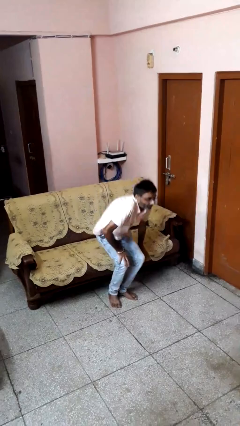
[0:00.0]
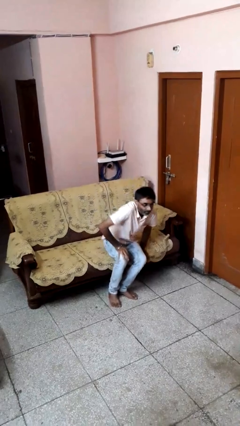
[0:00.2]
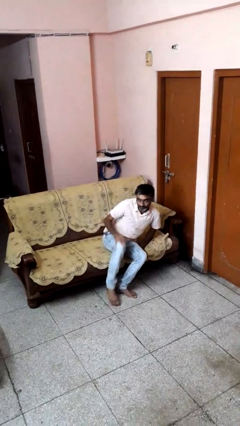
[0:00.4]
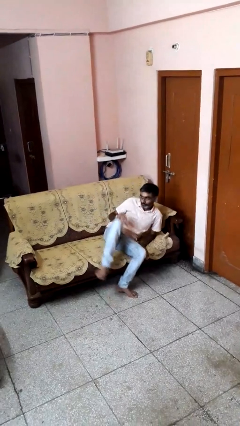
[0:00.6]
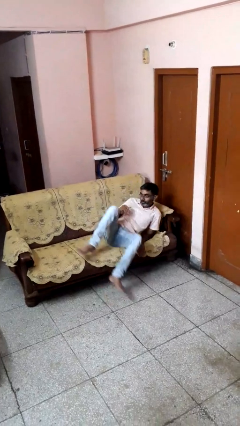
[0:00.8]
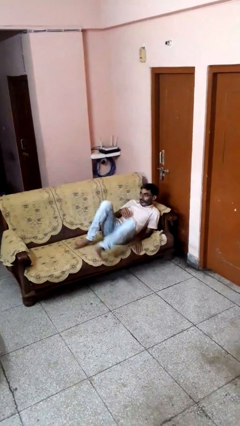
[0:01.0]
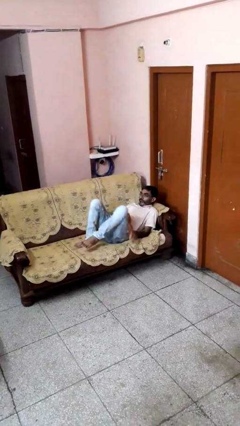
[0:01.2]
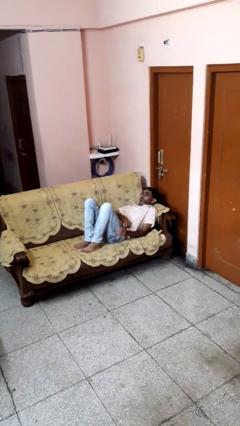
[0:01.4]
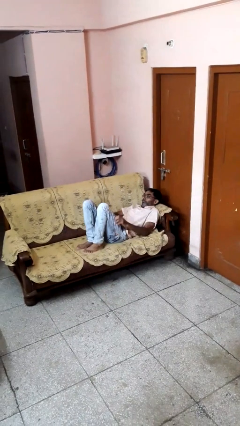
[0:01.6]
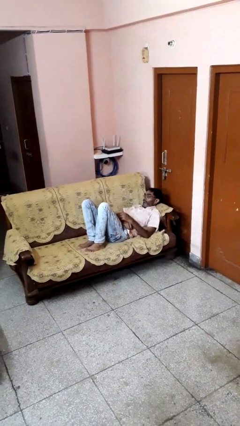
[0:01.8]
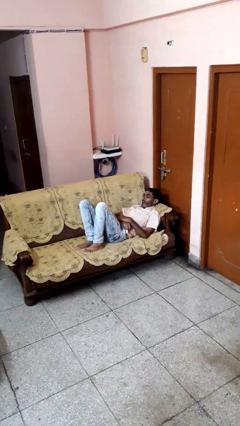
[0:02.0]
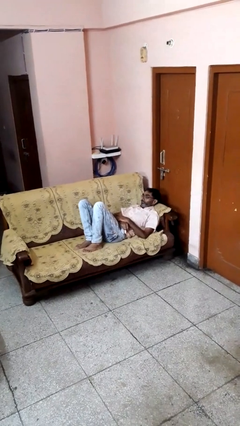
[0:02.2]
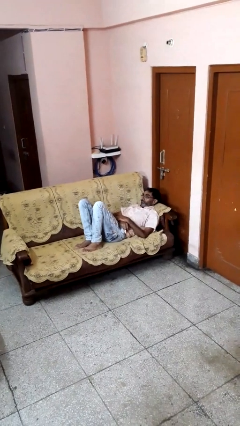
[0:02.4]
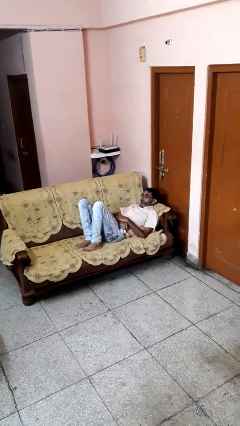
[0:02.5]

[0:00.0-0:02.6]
person lies down on couch

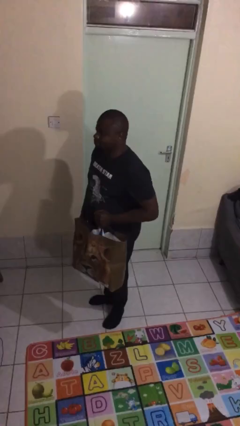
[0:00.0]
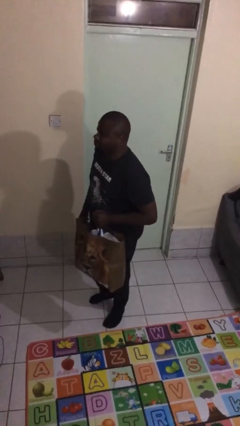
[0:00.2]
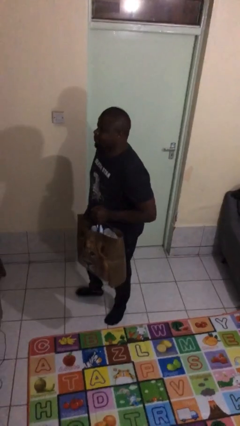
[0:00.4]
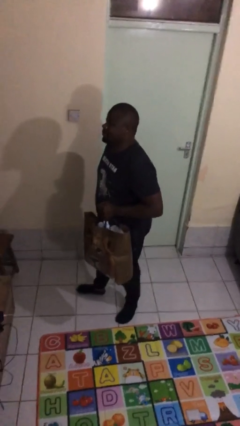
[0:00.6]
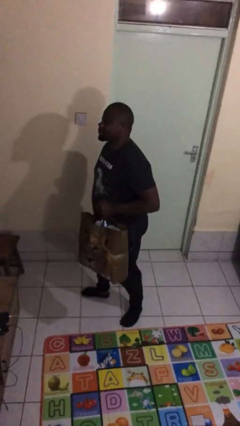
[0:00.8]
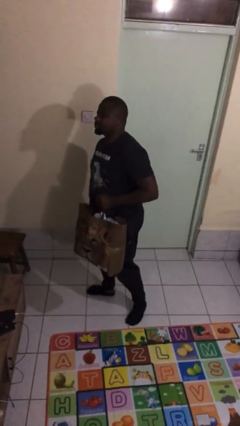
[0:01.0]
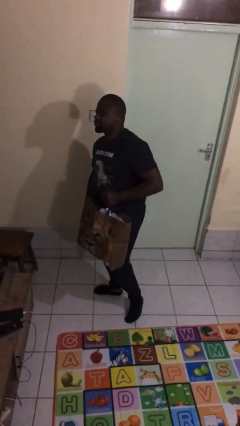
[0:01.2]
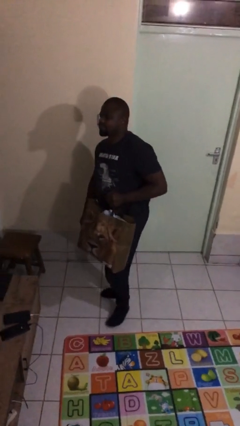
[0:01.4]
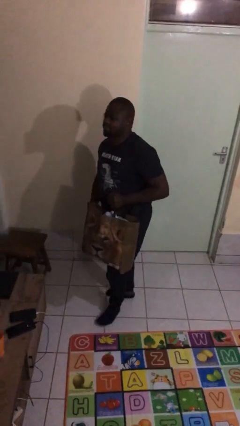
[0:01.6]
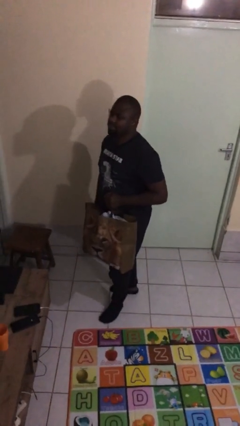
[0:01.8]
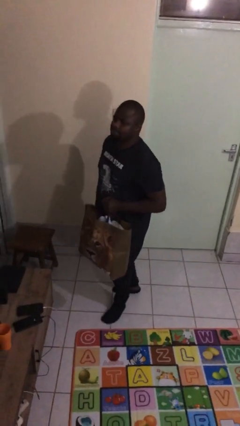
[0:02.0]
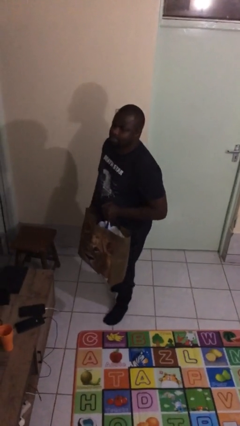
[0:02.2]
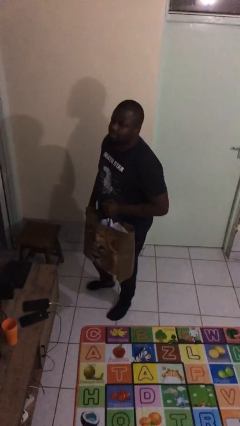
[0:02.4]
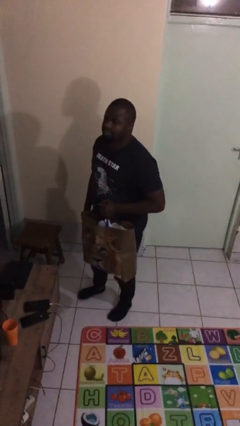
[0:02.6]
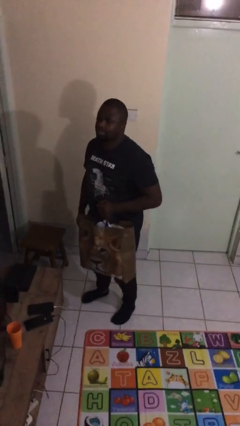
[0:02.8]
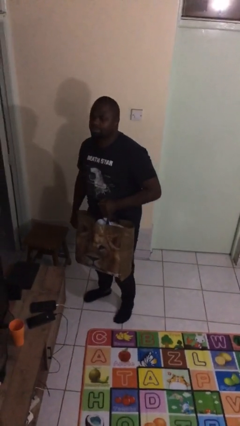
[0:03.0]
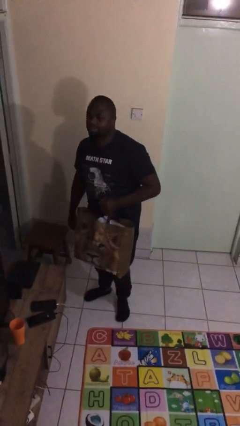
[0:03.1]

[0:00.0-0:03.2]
person carries groceries

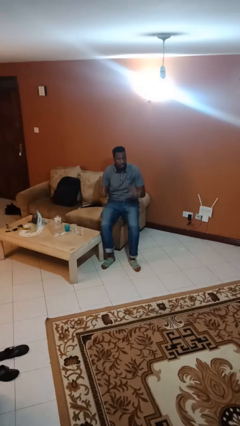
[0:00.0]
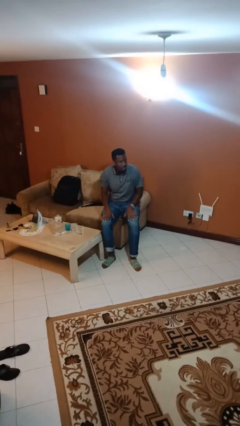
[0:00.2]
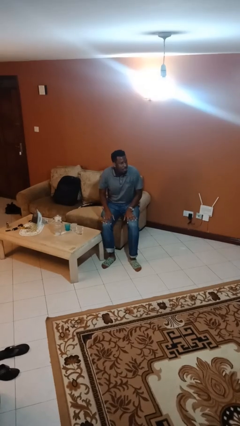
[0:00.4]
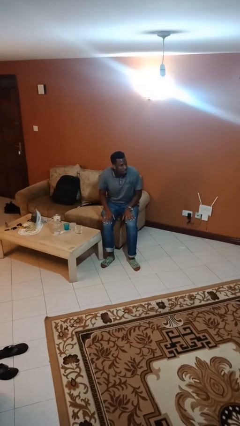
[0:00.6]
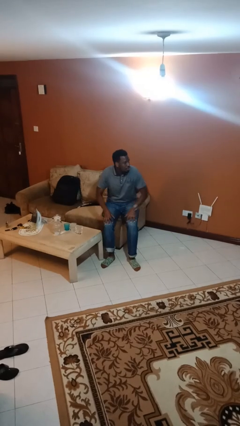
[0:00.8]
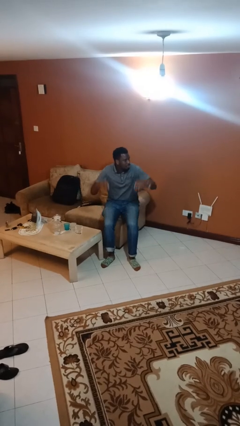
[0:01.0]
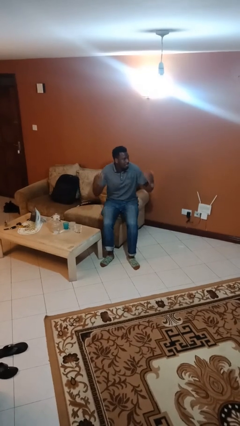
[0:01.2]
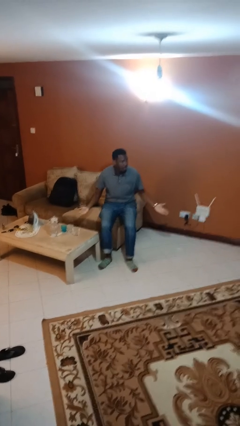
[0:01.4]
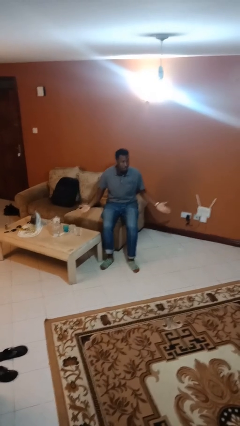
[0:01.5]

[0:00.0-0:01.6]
person slaps hands on thighs

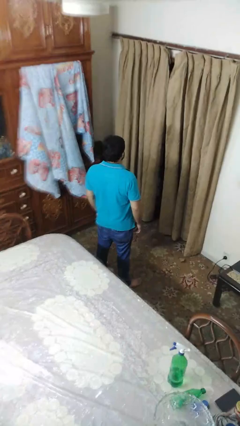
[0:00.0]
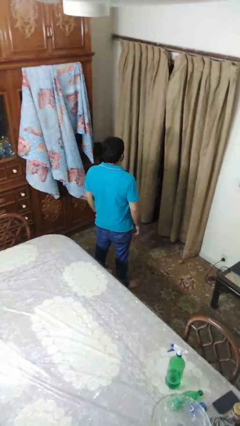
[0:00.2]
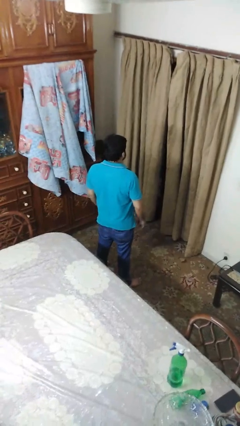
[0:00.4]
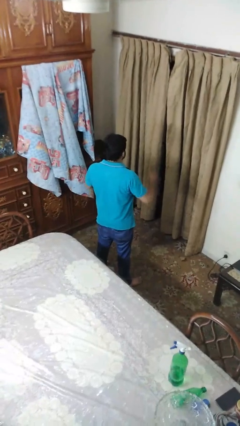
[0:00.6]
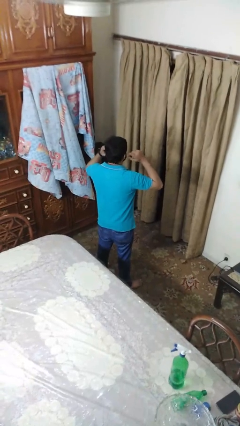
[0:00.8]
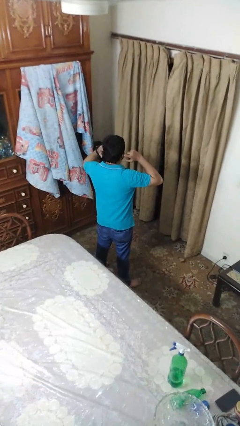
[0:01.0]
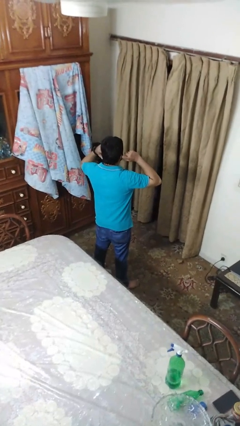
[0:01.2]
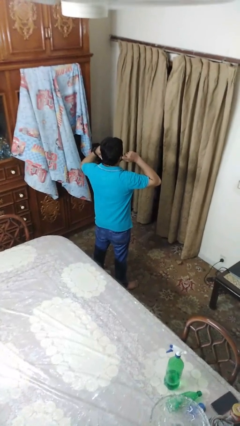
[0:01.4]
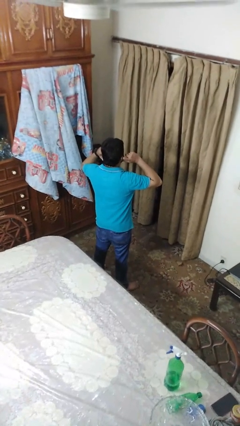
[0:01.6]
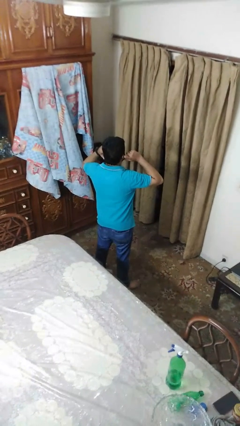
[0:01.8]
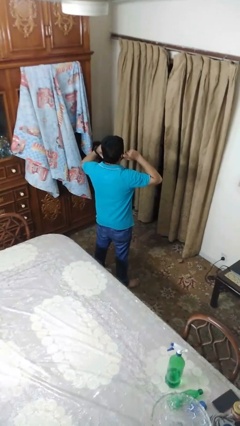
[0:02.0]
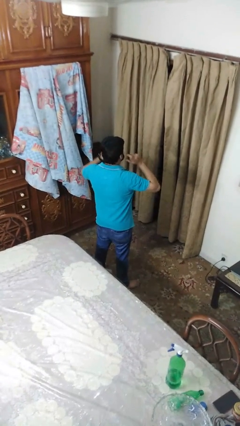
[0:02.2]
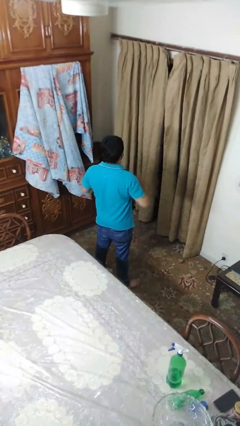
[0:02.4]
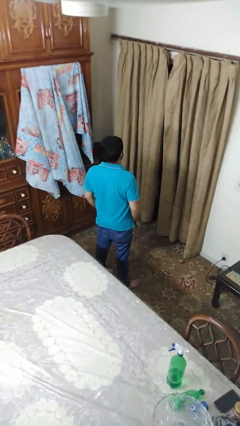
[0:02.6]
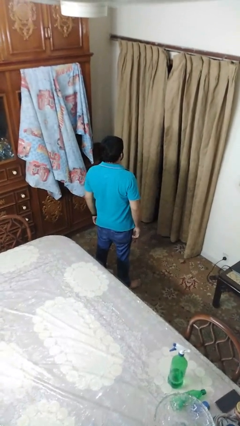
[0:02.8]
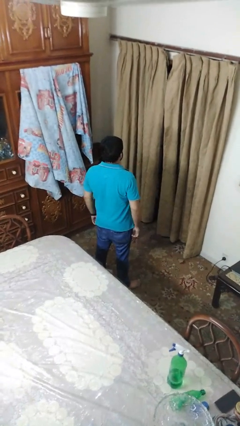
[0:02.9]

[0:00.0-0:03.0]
person puts fingers in ear

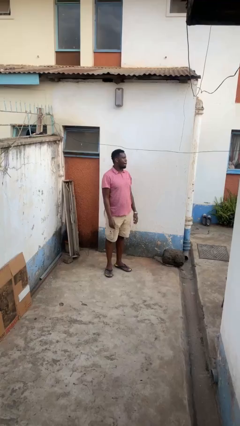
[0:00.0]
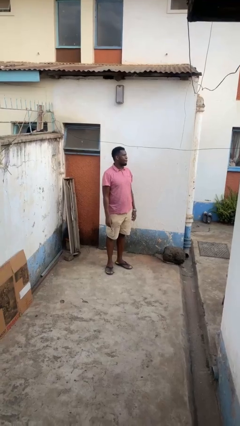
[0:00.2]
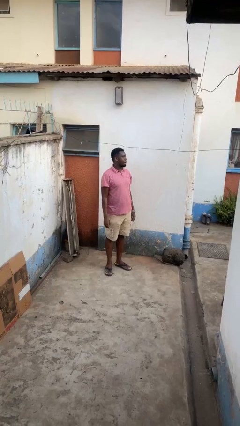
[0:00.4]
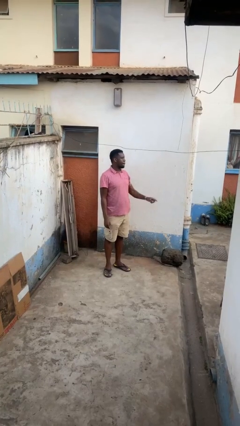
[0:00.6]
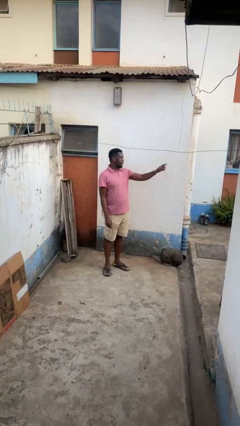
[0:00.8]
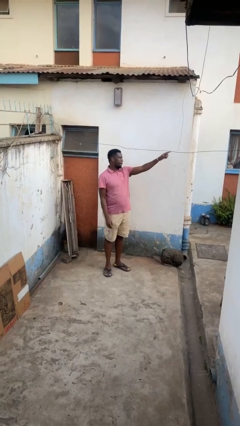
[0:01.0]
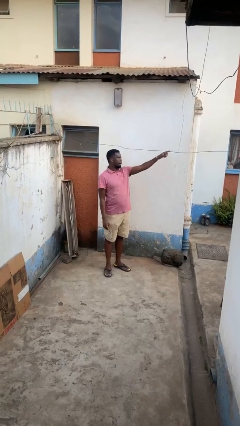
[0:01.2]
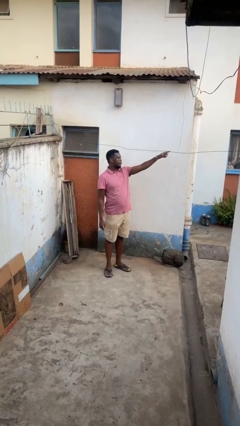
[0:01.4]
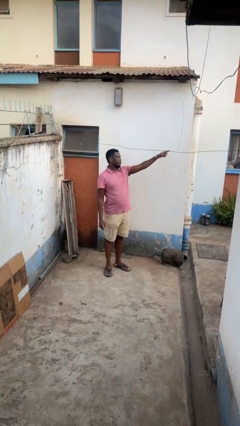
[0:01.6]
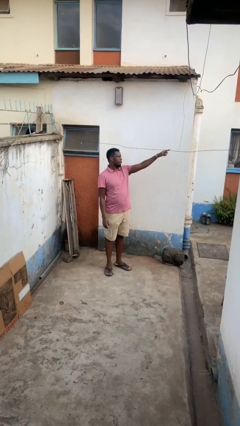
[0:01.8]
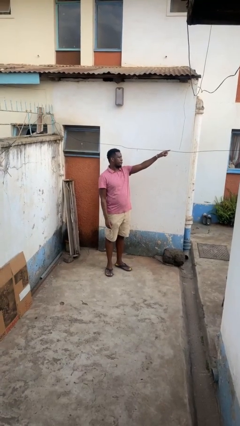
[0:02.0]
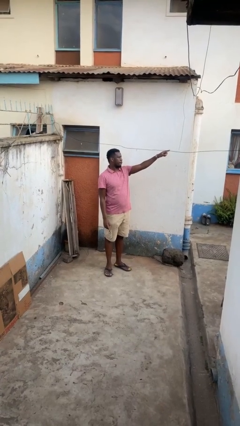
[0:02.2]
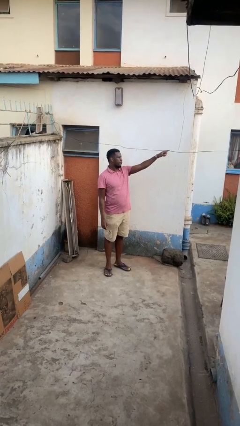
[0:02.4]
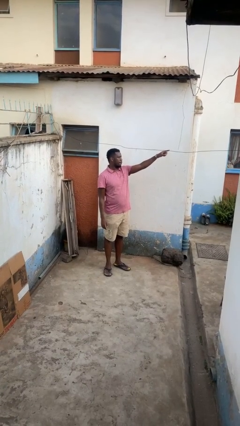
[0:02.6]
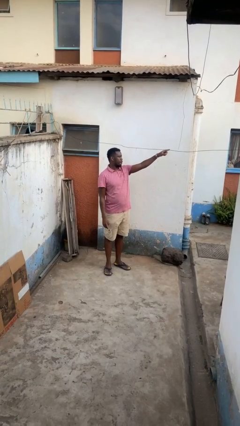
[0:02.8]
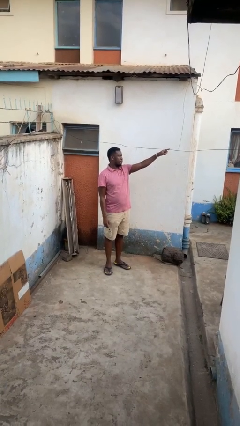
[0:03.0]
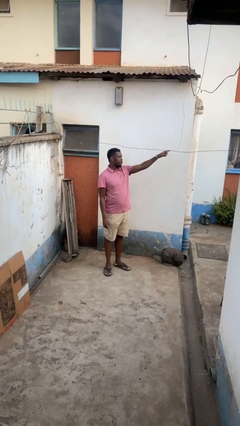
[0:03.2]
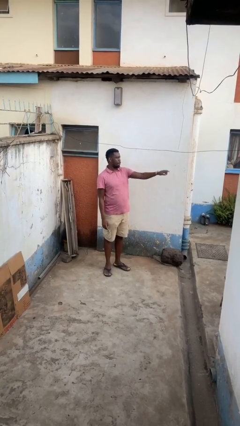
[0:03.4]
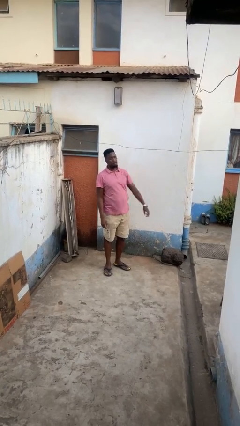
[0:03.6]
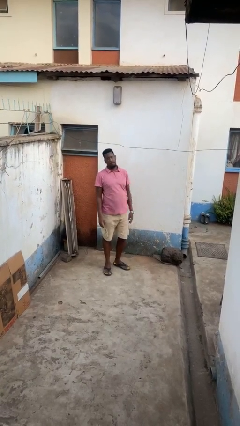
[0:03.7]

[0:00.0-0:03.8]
person points at person

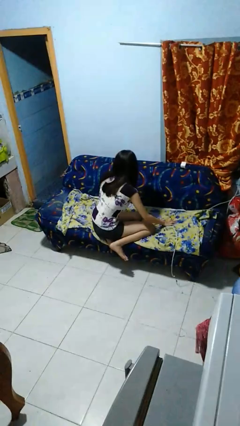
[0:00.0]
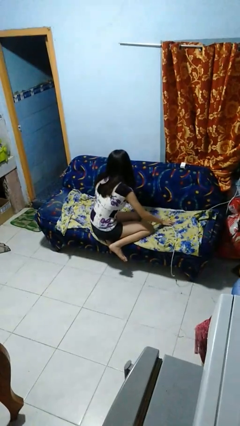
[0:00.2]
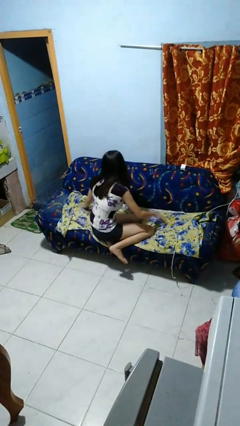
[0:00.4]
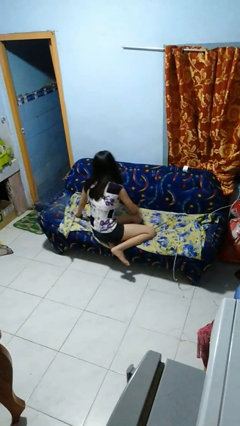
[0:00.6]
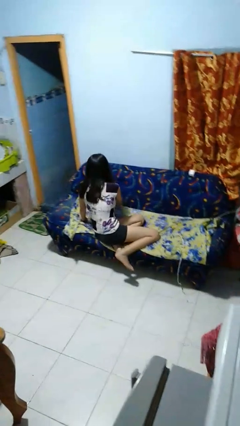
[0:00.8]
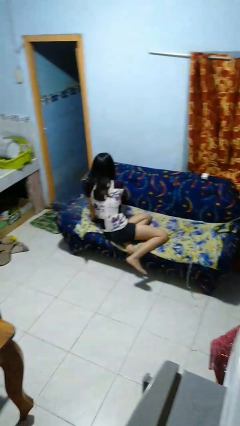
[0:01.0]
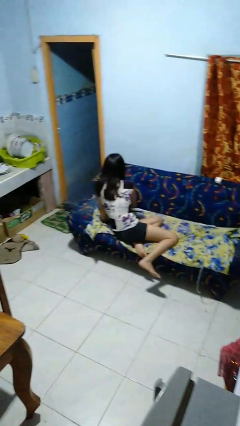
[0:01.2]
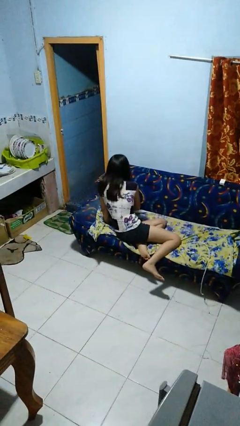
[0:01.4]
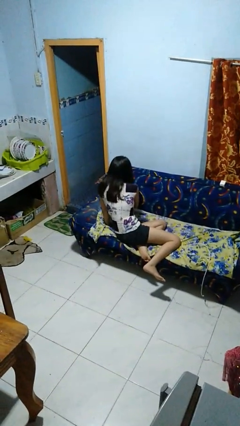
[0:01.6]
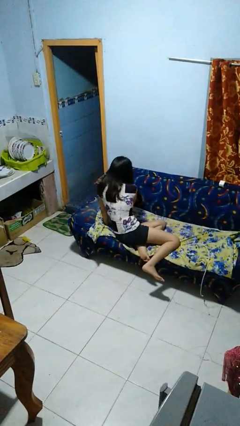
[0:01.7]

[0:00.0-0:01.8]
person searches in couch

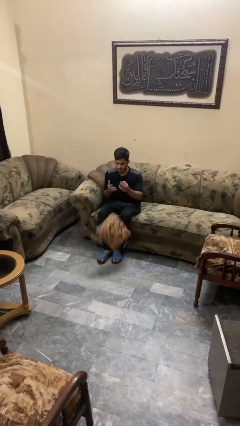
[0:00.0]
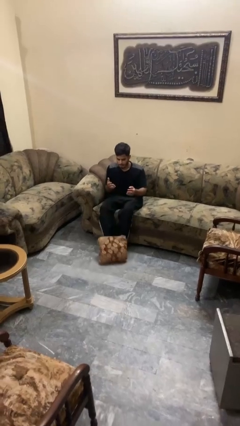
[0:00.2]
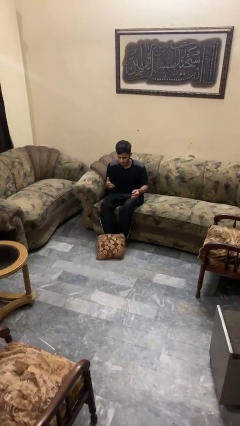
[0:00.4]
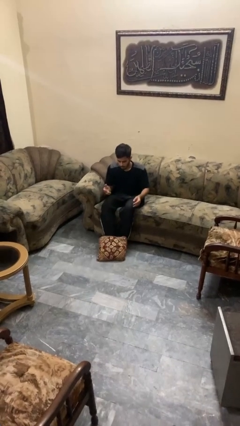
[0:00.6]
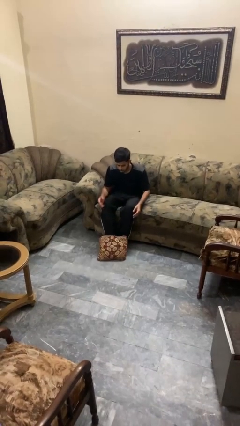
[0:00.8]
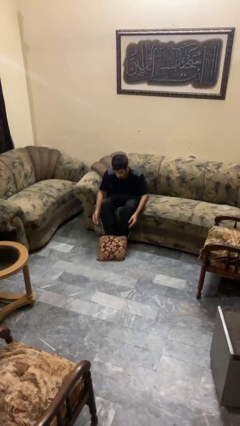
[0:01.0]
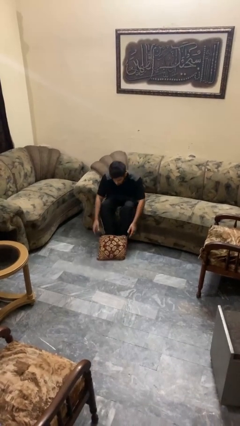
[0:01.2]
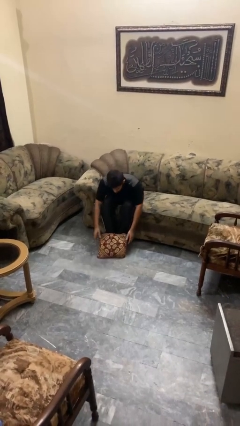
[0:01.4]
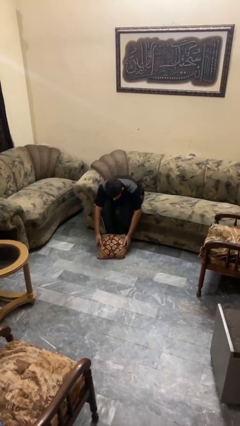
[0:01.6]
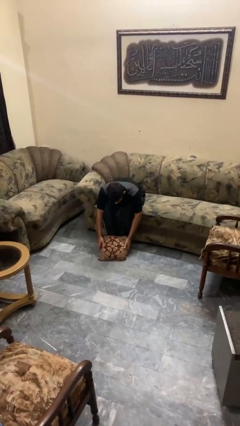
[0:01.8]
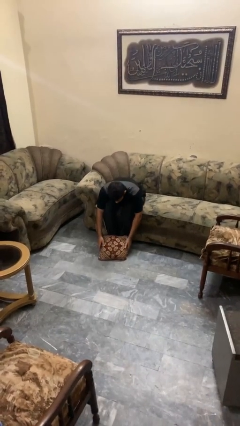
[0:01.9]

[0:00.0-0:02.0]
person drops object
